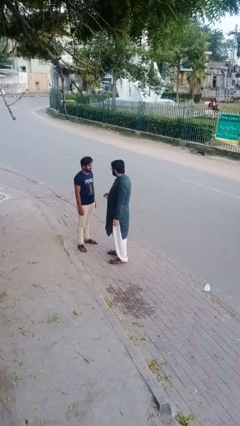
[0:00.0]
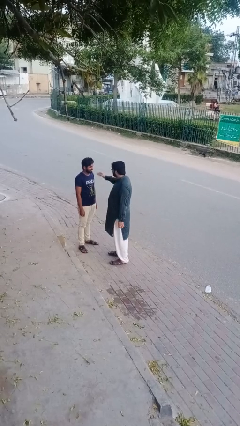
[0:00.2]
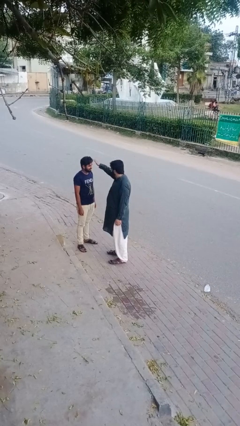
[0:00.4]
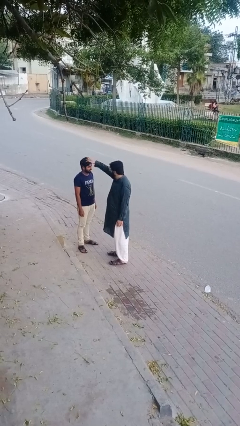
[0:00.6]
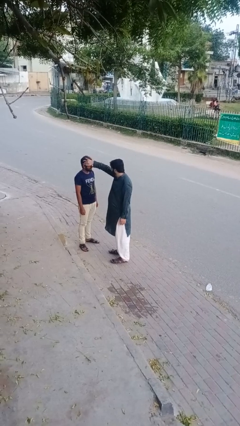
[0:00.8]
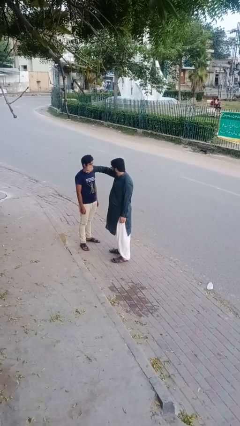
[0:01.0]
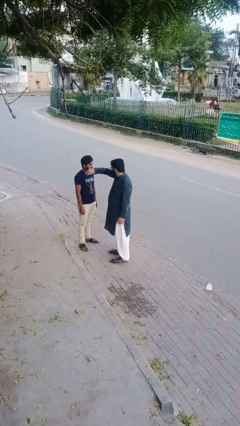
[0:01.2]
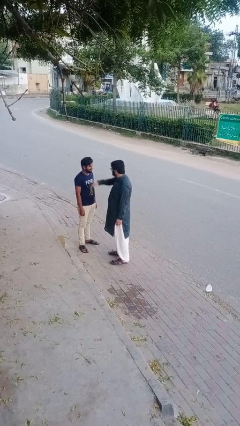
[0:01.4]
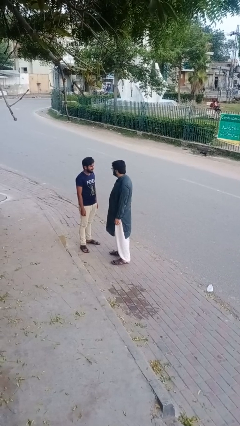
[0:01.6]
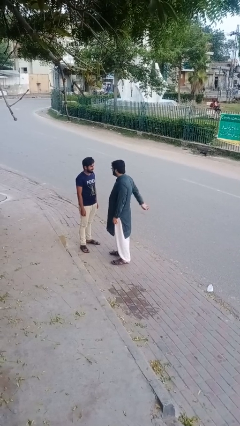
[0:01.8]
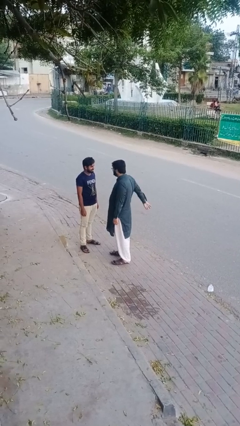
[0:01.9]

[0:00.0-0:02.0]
person grabs person by hair

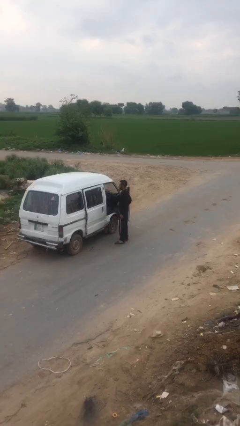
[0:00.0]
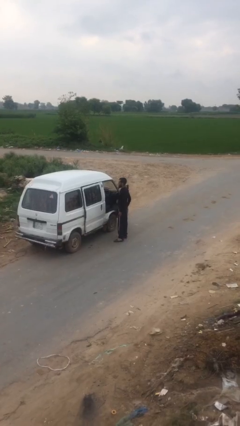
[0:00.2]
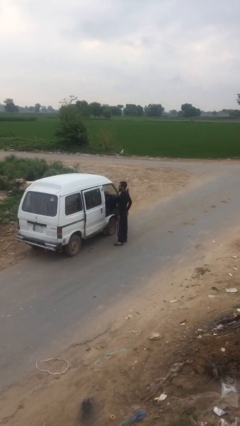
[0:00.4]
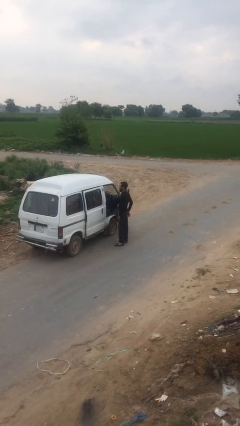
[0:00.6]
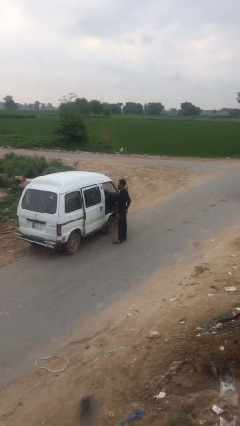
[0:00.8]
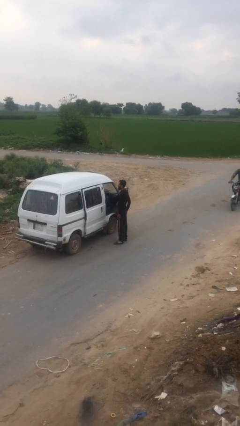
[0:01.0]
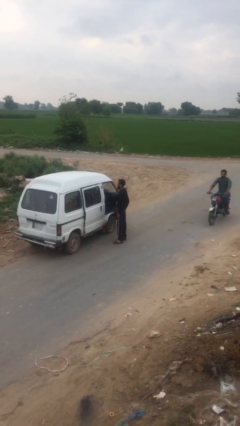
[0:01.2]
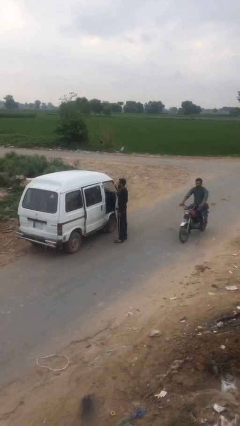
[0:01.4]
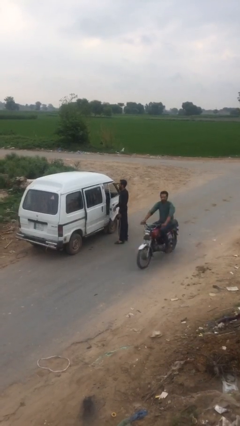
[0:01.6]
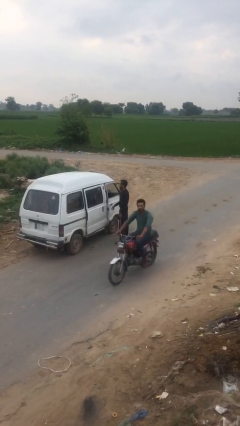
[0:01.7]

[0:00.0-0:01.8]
person closes car door

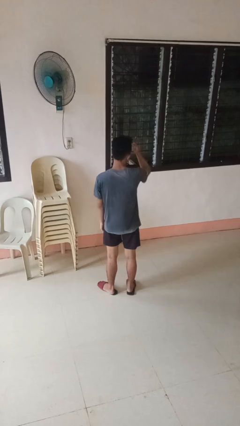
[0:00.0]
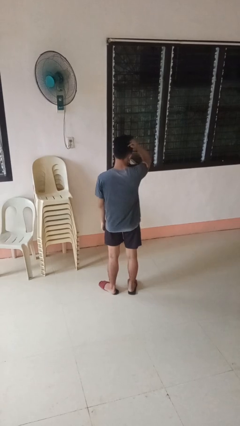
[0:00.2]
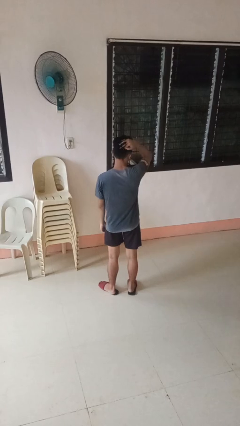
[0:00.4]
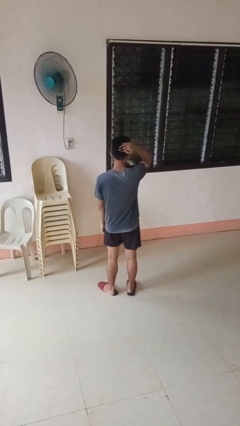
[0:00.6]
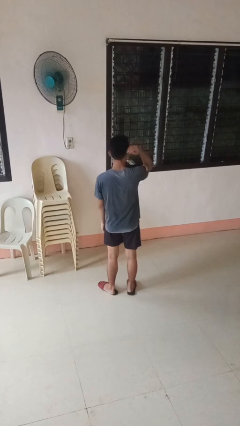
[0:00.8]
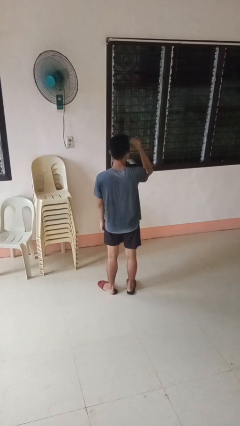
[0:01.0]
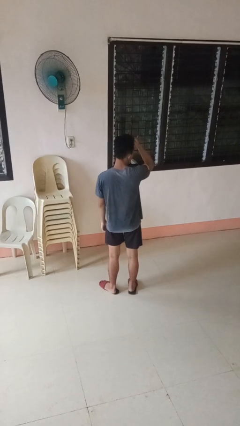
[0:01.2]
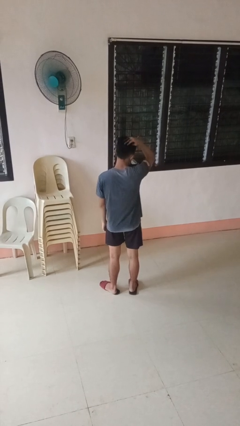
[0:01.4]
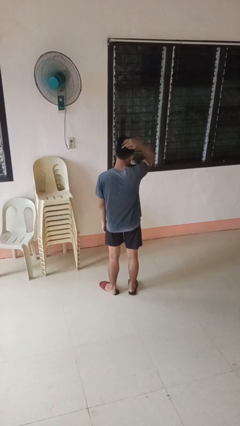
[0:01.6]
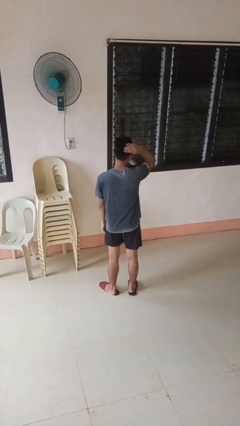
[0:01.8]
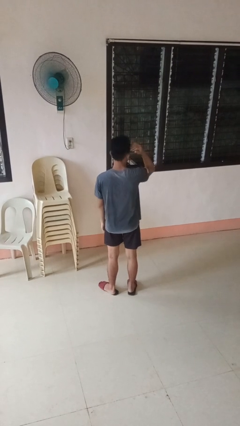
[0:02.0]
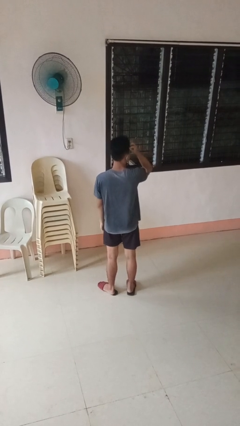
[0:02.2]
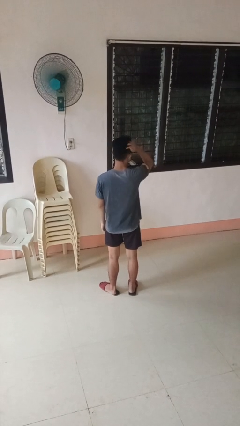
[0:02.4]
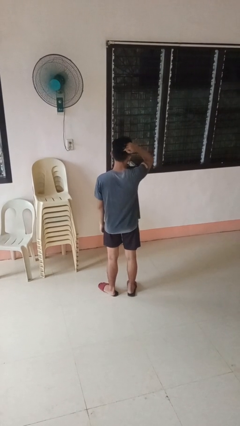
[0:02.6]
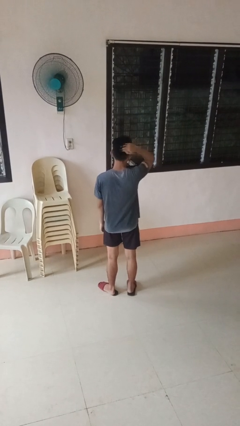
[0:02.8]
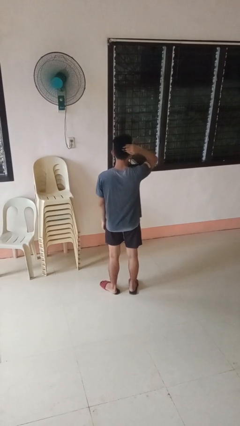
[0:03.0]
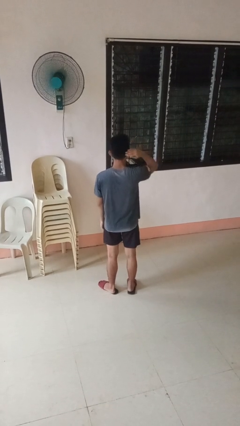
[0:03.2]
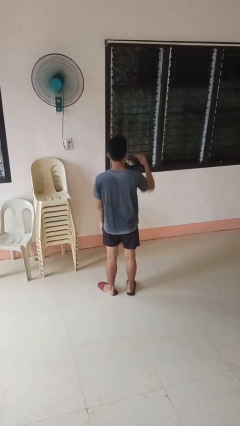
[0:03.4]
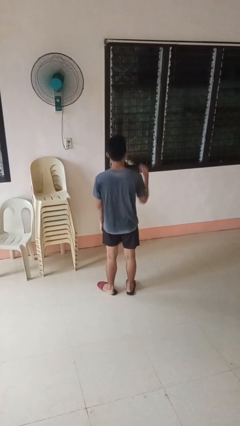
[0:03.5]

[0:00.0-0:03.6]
person strokes hair

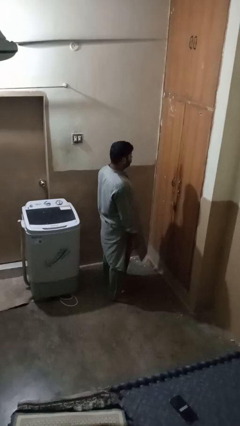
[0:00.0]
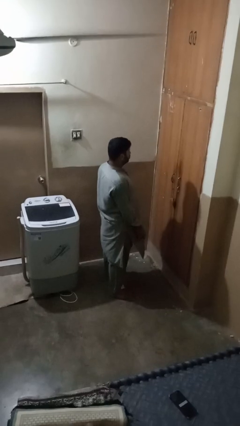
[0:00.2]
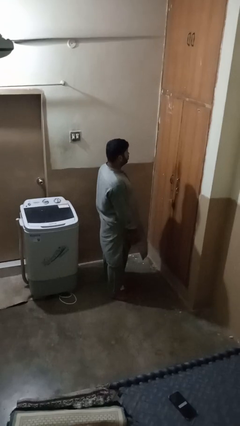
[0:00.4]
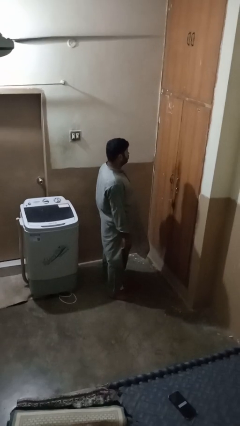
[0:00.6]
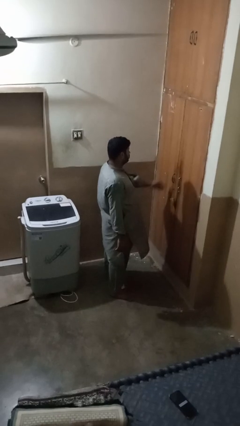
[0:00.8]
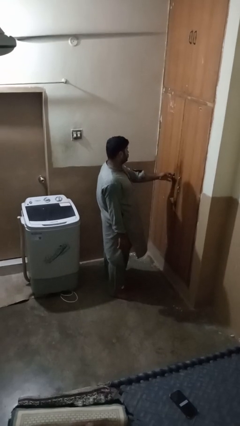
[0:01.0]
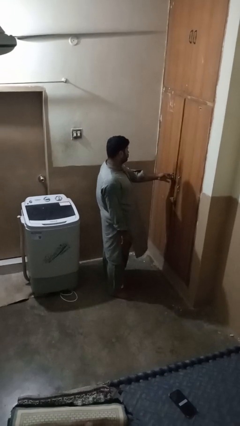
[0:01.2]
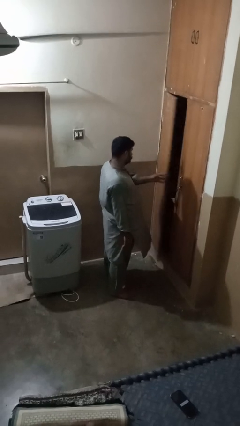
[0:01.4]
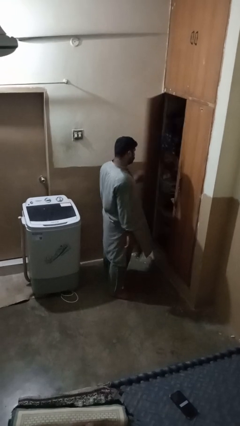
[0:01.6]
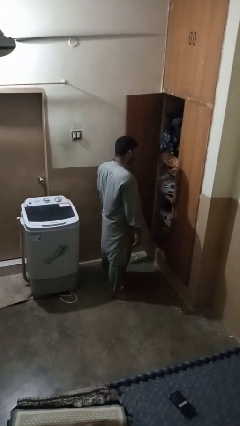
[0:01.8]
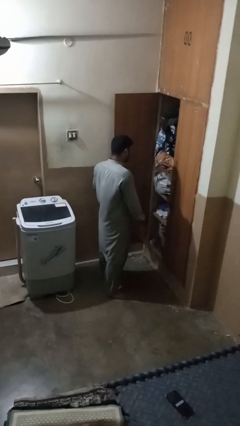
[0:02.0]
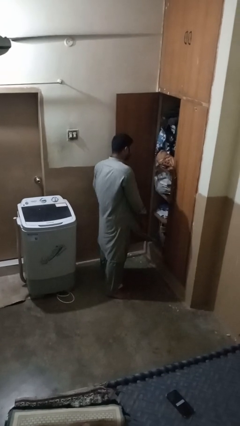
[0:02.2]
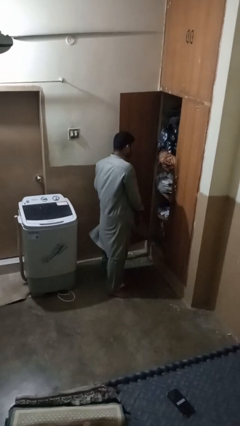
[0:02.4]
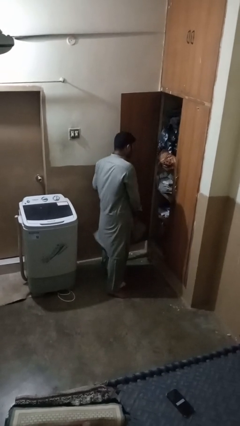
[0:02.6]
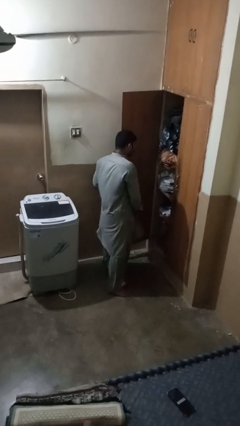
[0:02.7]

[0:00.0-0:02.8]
person opens closet door

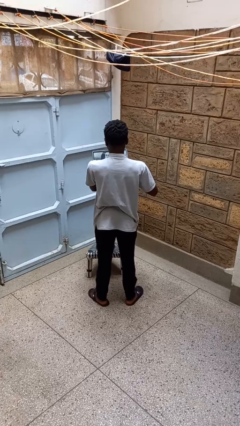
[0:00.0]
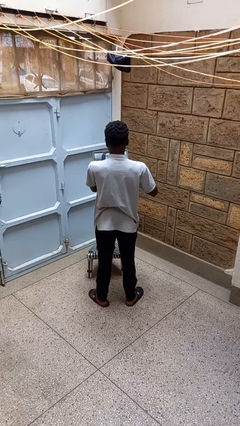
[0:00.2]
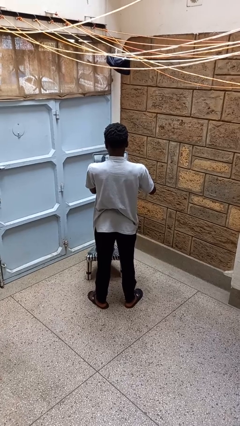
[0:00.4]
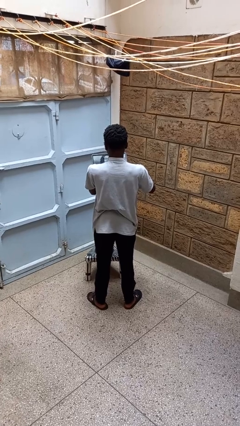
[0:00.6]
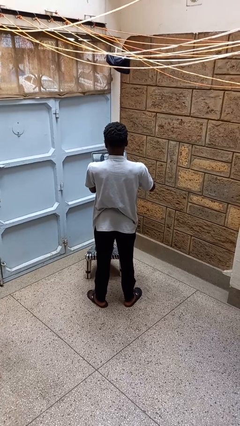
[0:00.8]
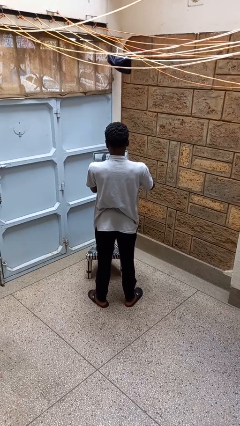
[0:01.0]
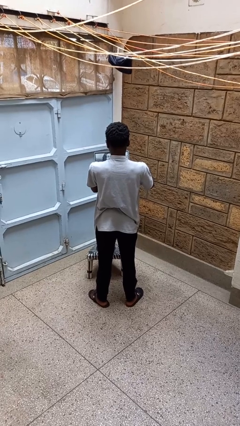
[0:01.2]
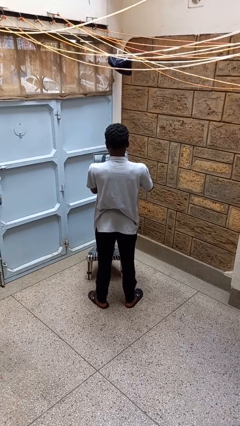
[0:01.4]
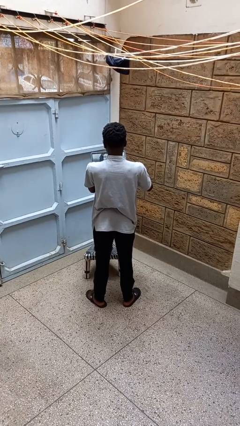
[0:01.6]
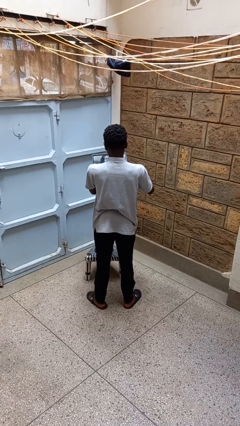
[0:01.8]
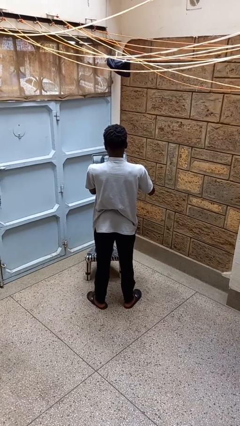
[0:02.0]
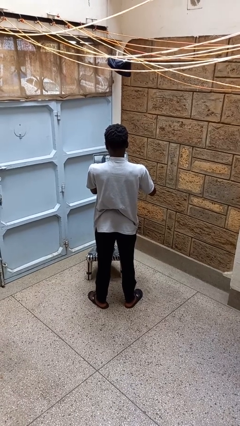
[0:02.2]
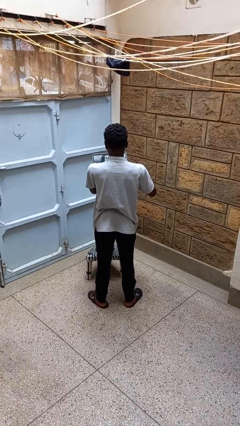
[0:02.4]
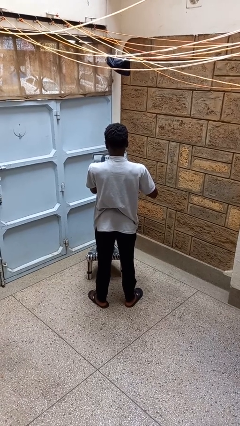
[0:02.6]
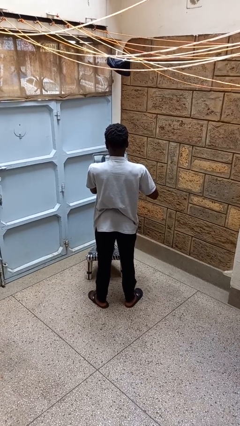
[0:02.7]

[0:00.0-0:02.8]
person interacts with tablet

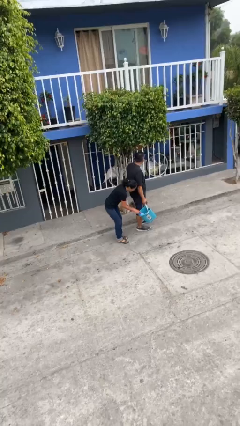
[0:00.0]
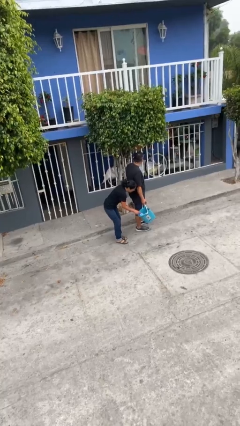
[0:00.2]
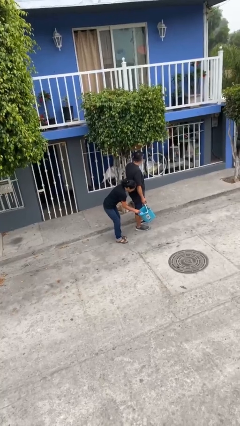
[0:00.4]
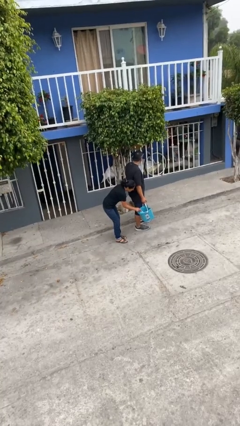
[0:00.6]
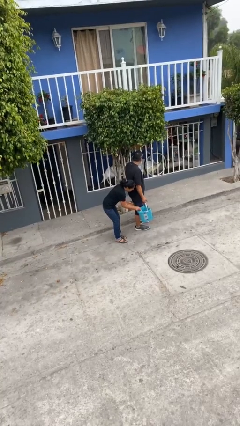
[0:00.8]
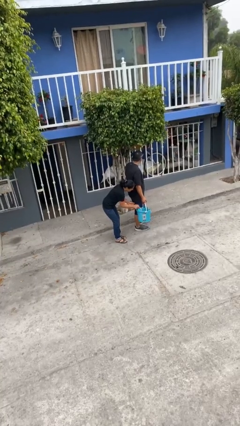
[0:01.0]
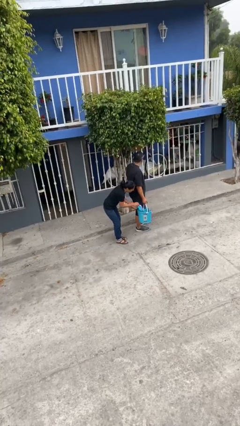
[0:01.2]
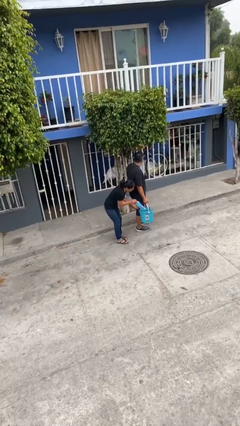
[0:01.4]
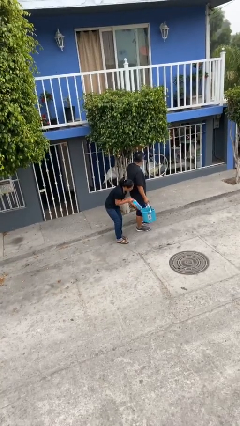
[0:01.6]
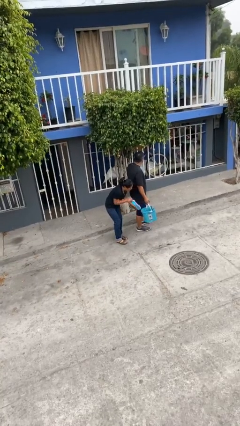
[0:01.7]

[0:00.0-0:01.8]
person steals object from person

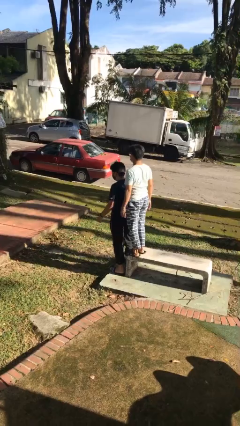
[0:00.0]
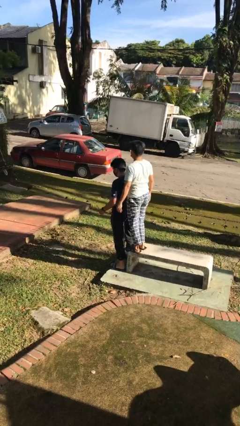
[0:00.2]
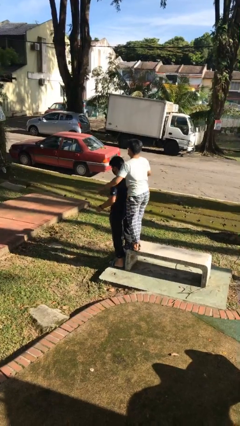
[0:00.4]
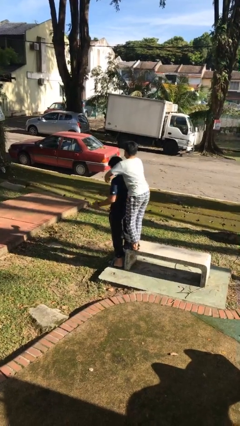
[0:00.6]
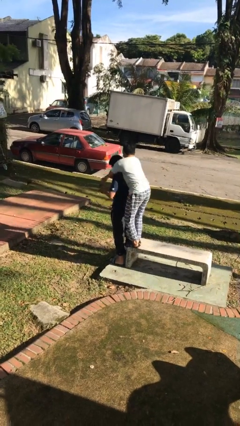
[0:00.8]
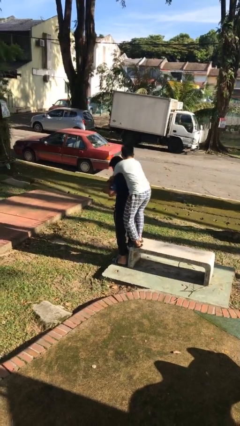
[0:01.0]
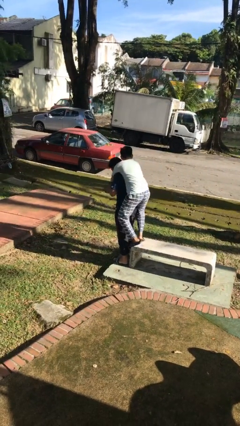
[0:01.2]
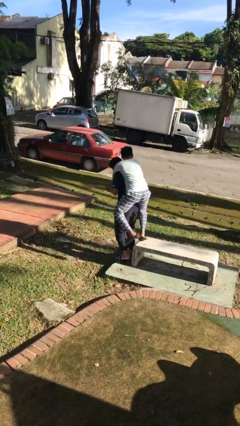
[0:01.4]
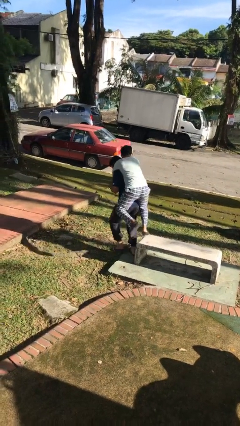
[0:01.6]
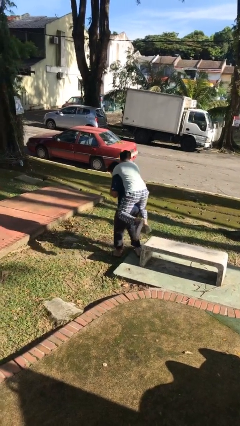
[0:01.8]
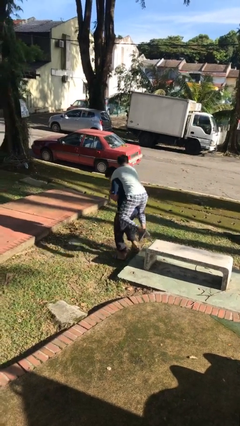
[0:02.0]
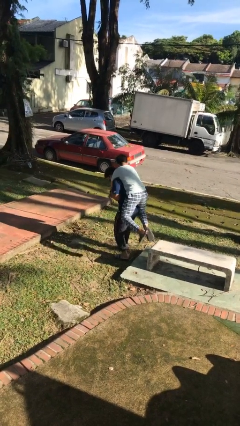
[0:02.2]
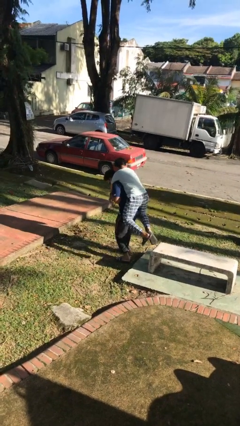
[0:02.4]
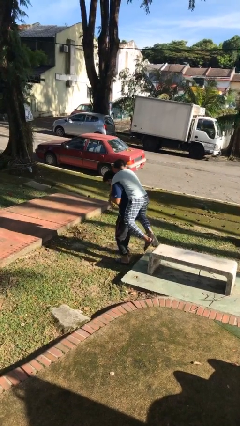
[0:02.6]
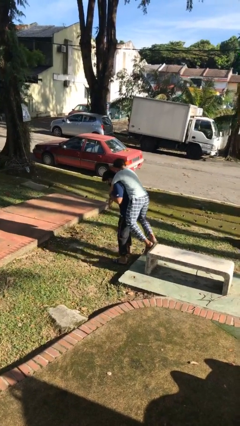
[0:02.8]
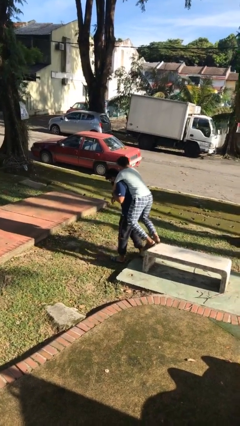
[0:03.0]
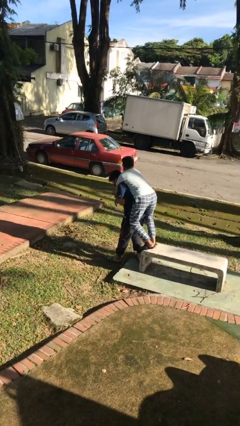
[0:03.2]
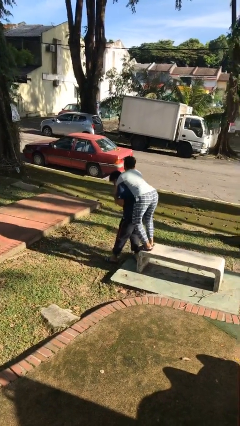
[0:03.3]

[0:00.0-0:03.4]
person carries person on back
